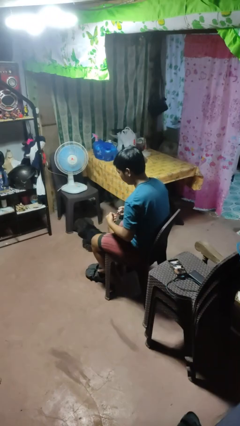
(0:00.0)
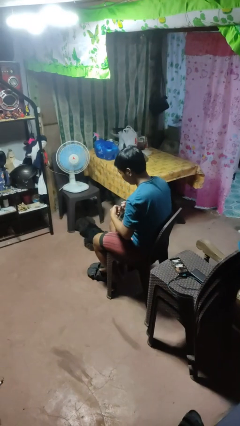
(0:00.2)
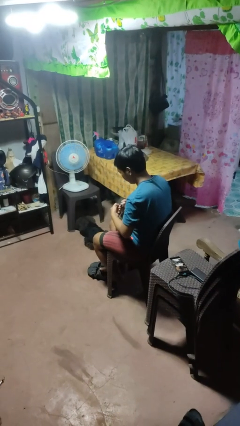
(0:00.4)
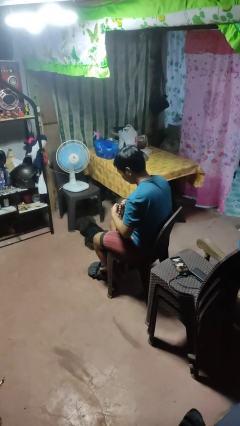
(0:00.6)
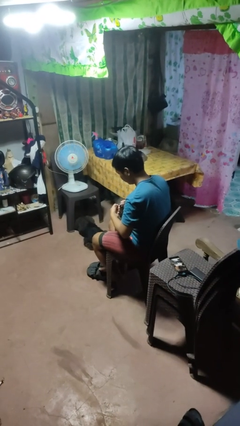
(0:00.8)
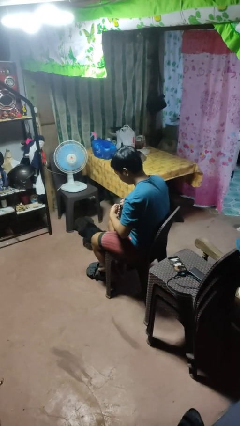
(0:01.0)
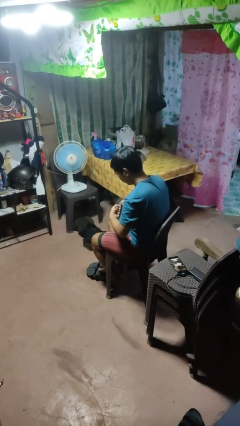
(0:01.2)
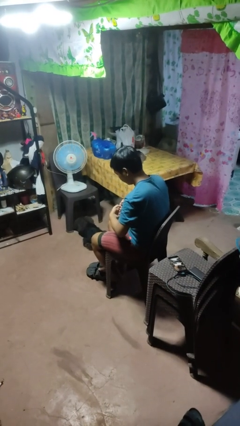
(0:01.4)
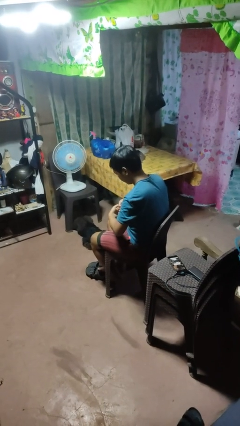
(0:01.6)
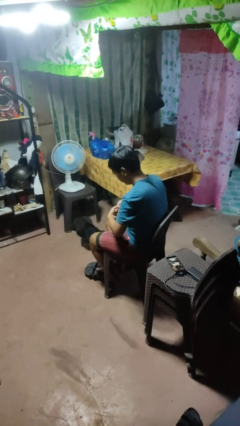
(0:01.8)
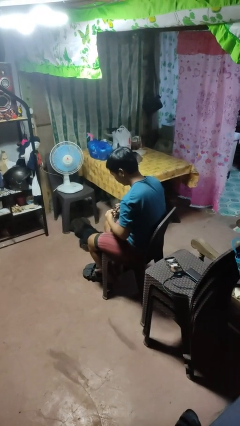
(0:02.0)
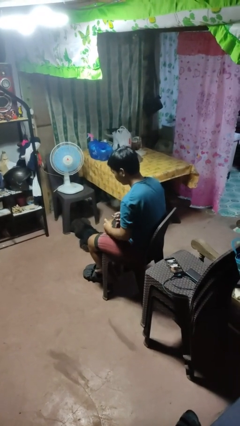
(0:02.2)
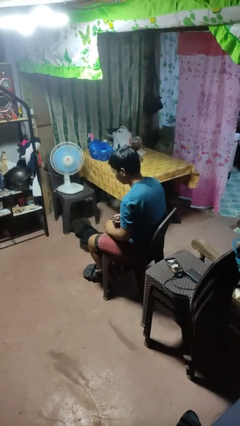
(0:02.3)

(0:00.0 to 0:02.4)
person clips fingernails

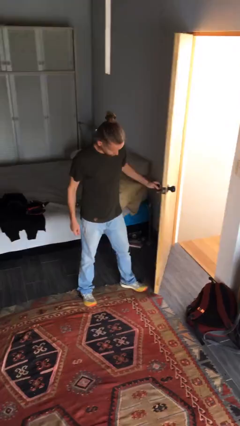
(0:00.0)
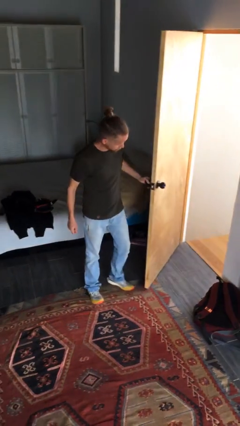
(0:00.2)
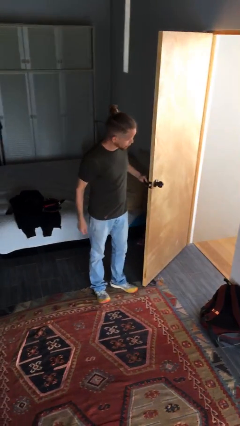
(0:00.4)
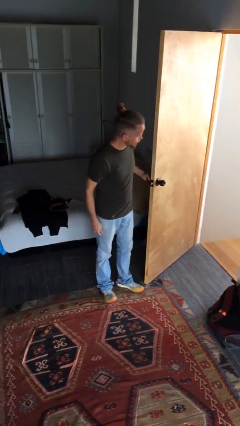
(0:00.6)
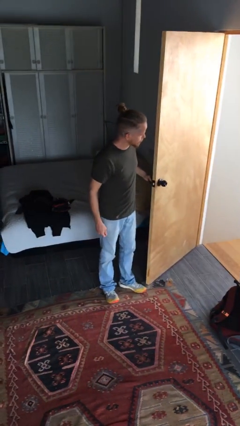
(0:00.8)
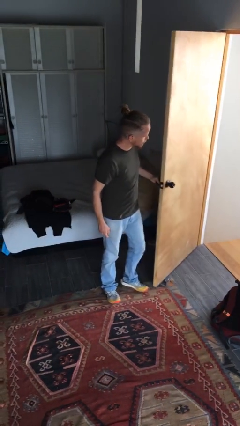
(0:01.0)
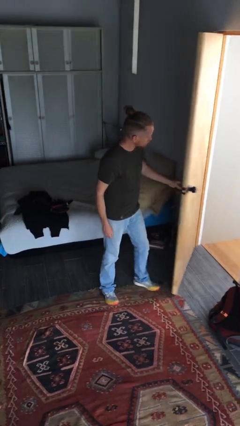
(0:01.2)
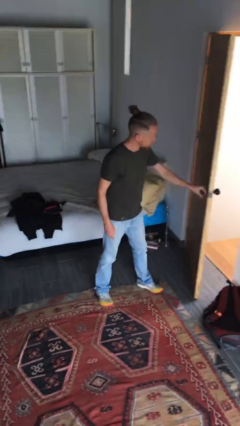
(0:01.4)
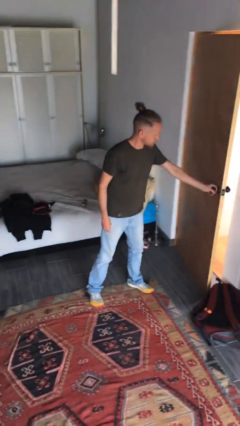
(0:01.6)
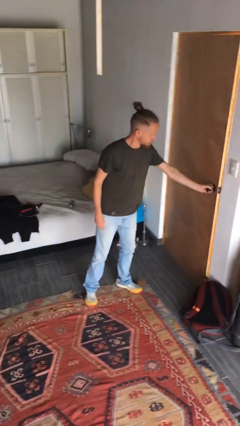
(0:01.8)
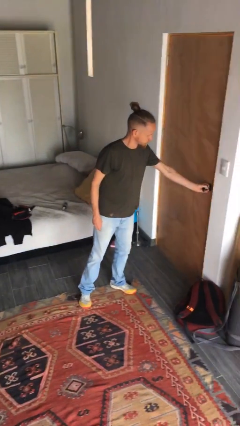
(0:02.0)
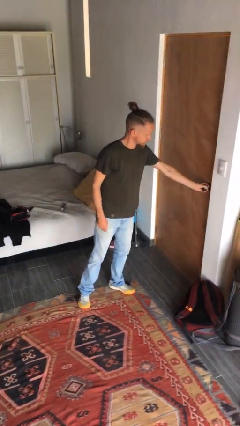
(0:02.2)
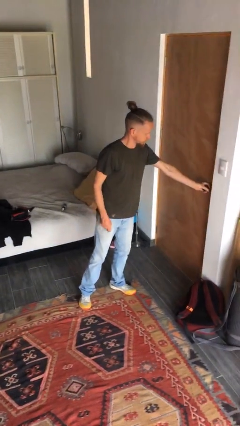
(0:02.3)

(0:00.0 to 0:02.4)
person closes facility door

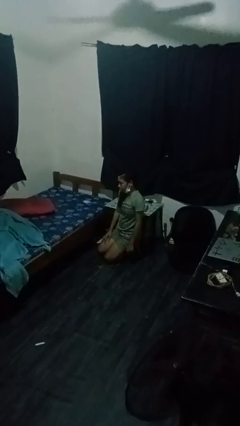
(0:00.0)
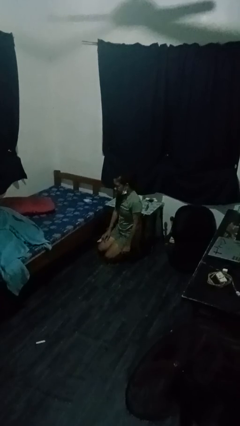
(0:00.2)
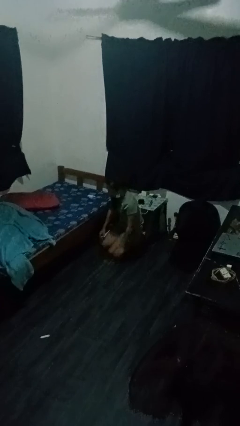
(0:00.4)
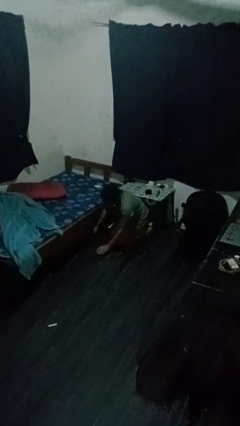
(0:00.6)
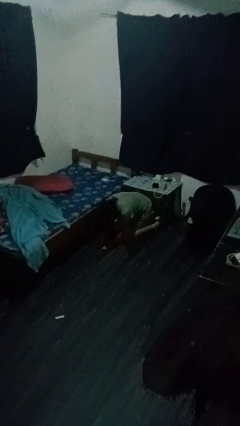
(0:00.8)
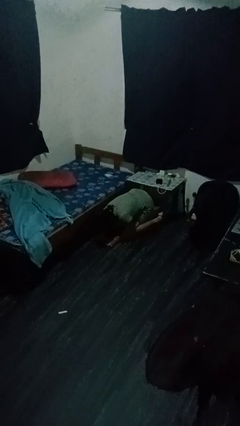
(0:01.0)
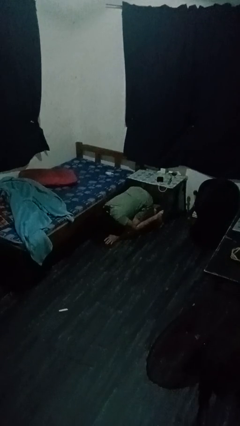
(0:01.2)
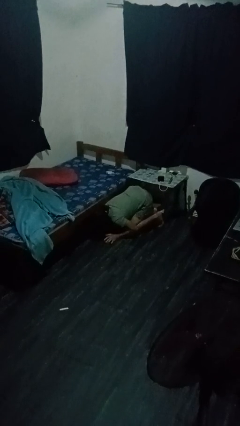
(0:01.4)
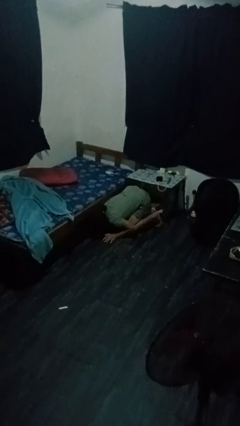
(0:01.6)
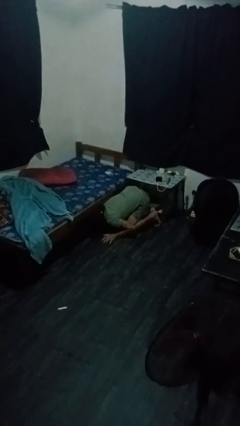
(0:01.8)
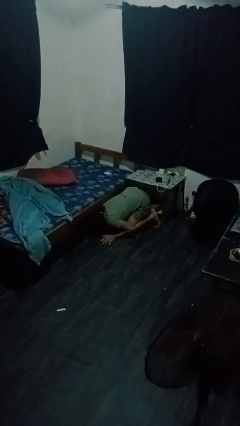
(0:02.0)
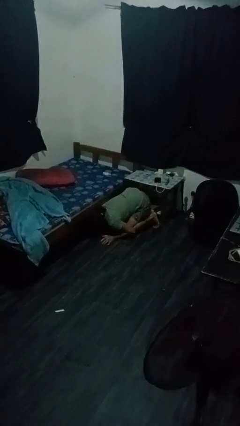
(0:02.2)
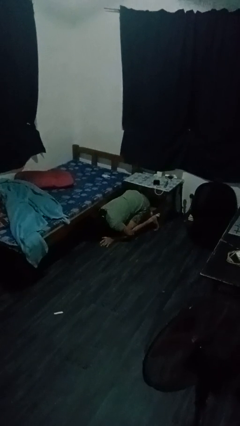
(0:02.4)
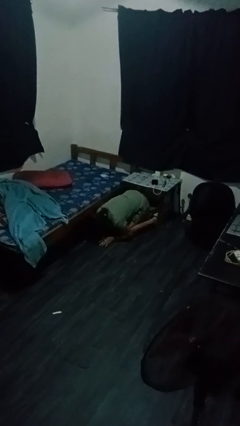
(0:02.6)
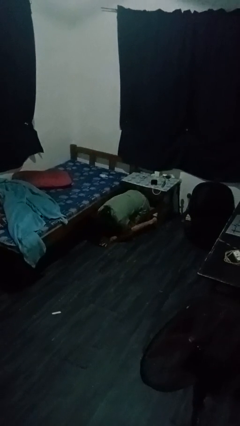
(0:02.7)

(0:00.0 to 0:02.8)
person searches under bed

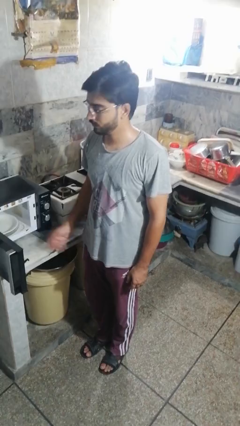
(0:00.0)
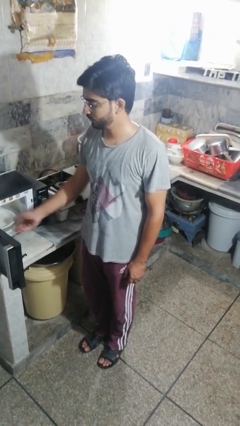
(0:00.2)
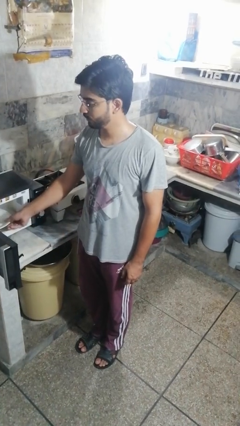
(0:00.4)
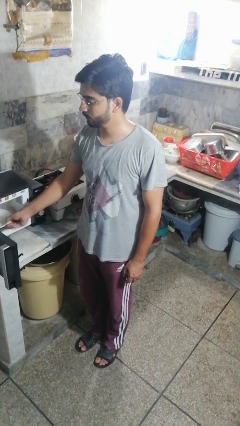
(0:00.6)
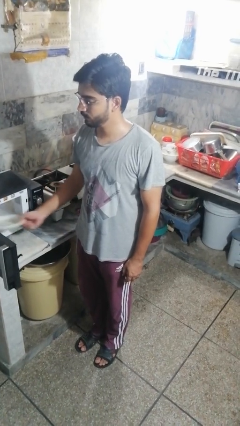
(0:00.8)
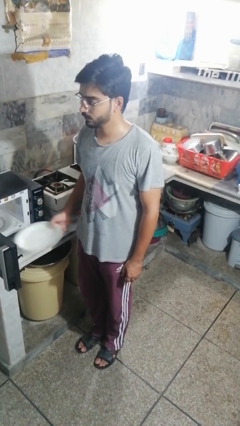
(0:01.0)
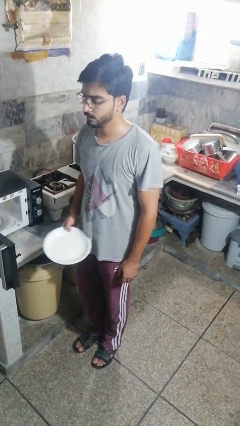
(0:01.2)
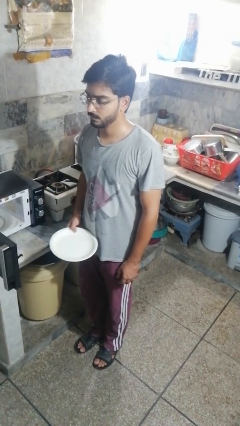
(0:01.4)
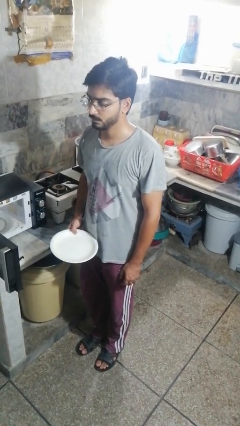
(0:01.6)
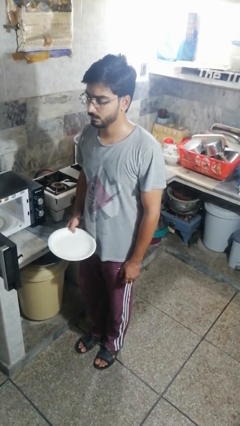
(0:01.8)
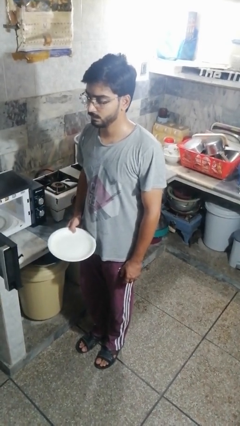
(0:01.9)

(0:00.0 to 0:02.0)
person takes object from oven

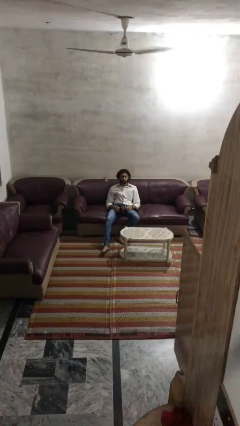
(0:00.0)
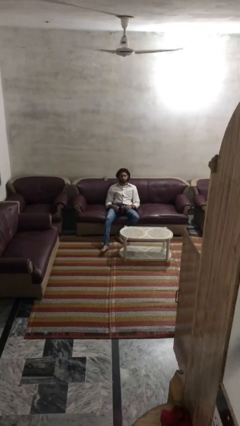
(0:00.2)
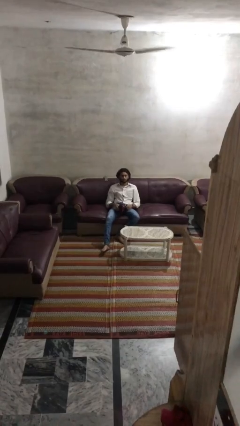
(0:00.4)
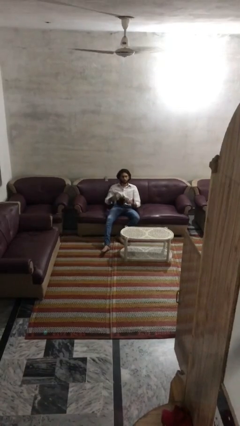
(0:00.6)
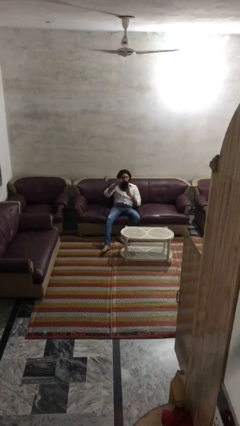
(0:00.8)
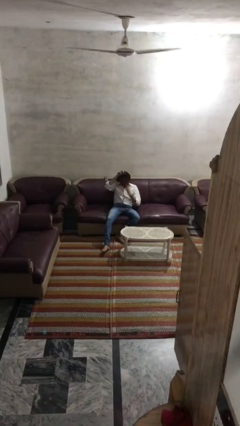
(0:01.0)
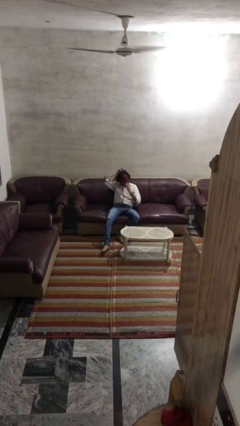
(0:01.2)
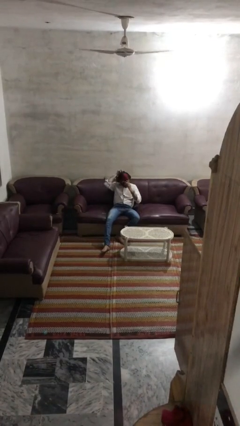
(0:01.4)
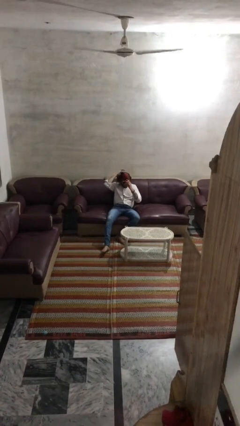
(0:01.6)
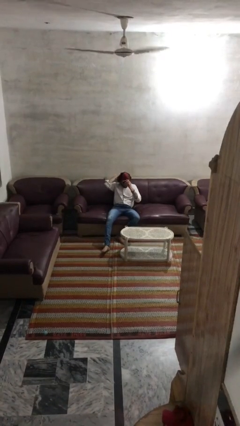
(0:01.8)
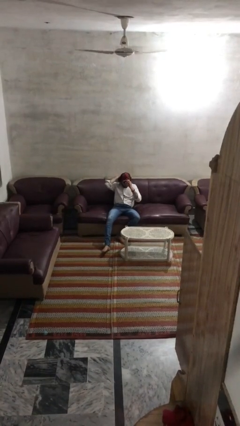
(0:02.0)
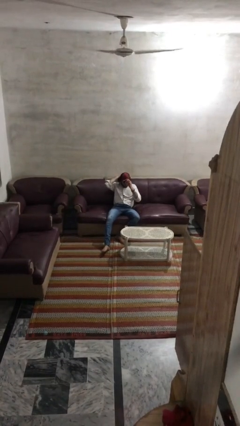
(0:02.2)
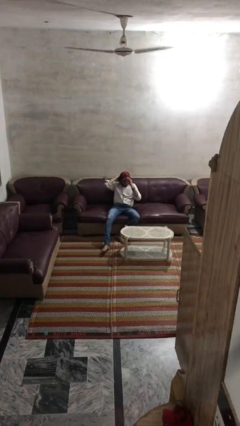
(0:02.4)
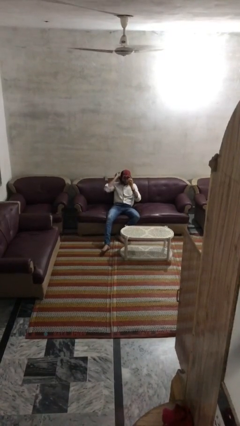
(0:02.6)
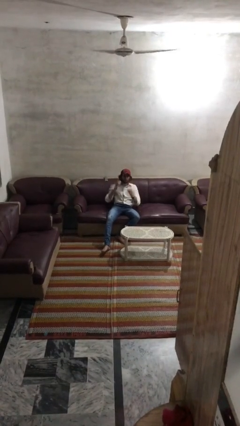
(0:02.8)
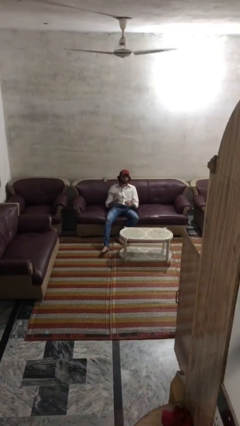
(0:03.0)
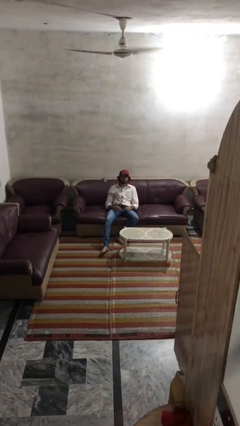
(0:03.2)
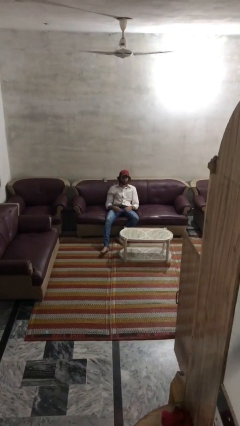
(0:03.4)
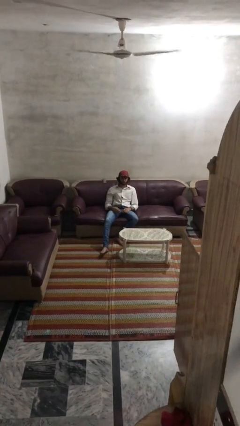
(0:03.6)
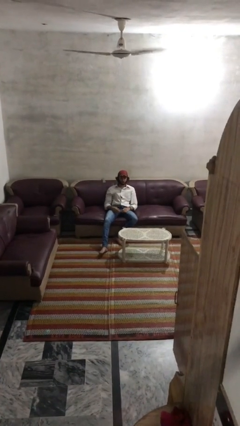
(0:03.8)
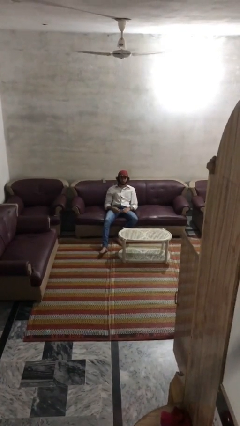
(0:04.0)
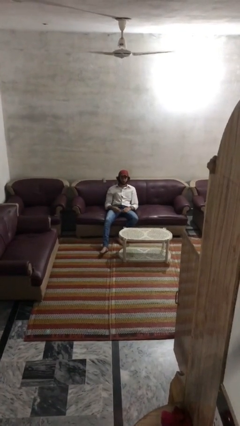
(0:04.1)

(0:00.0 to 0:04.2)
person puts on hat

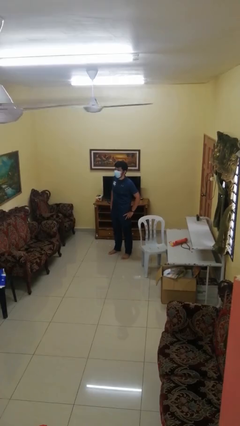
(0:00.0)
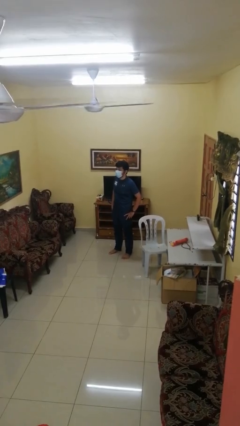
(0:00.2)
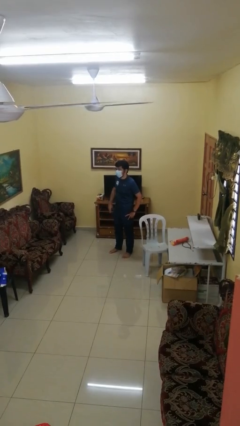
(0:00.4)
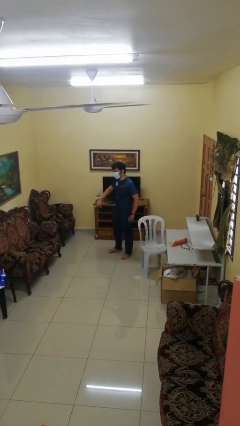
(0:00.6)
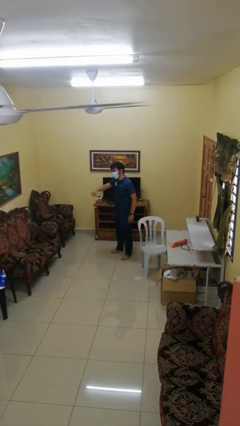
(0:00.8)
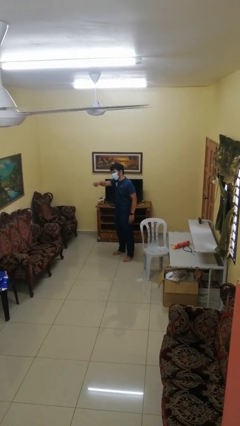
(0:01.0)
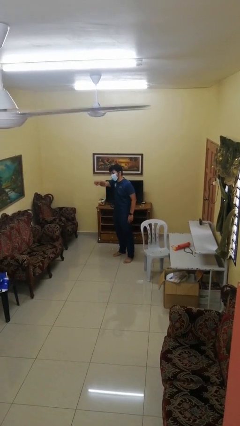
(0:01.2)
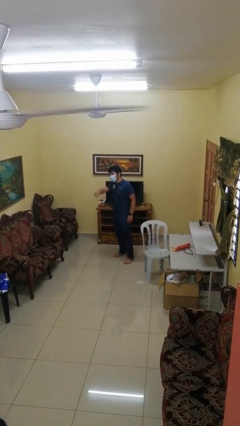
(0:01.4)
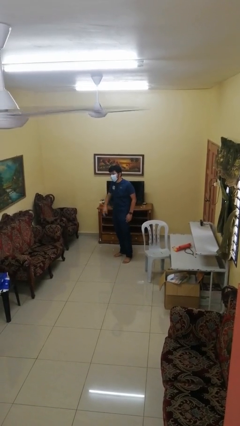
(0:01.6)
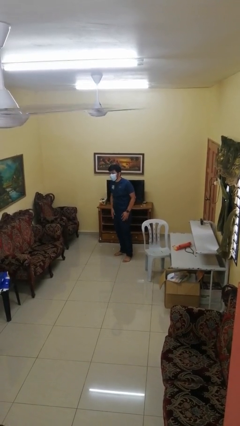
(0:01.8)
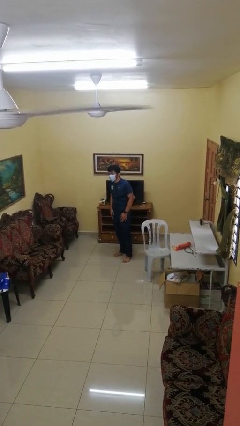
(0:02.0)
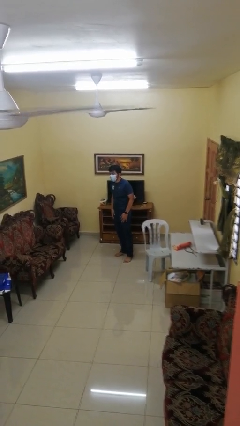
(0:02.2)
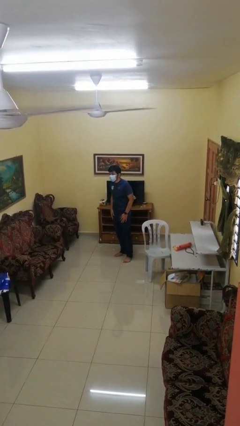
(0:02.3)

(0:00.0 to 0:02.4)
person points at person

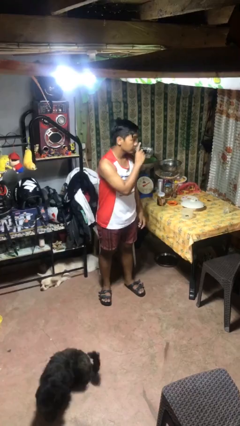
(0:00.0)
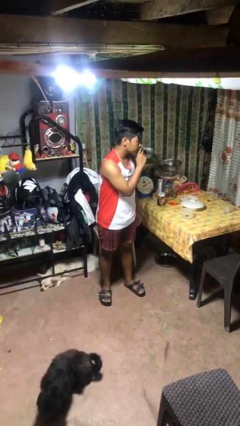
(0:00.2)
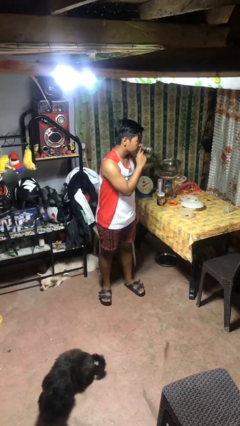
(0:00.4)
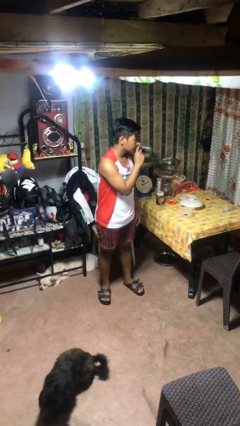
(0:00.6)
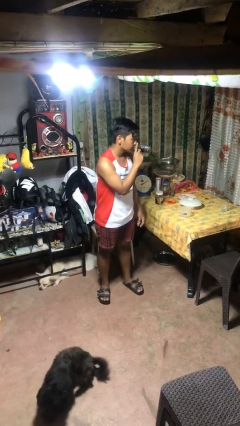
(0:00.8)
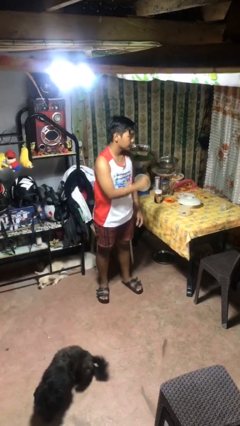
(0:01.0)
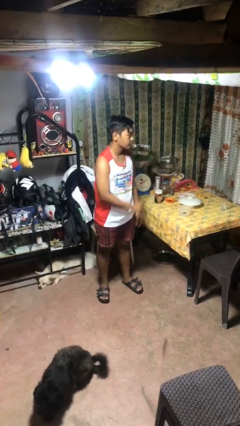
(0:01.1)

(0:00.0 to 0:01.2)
person gestures be quiet
